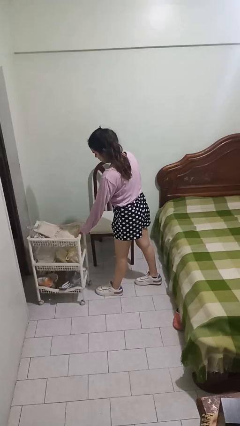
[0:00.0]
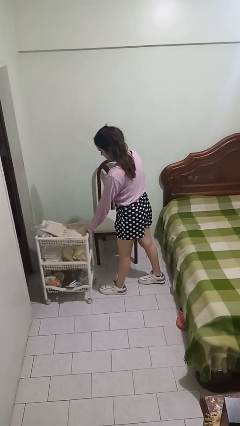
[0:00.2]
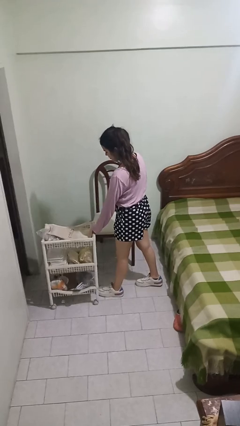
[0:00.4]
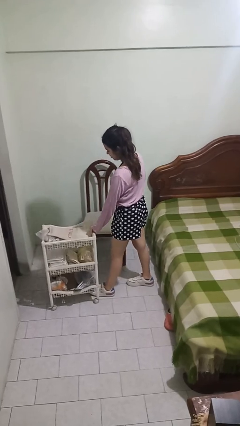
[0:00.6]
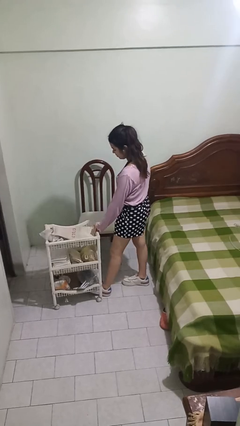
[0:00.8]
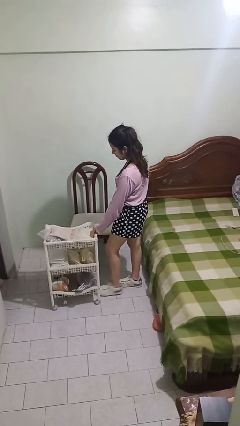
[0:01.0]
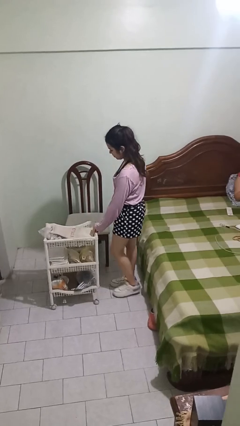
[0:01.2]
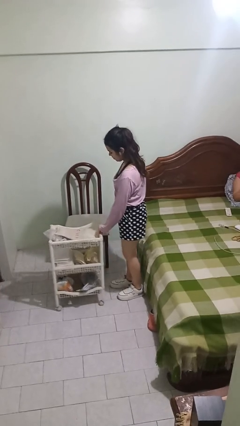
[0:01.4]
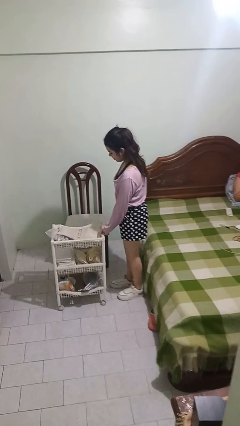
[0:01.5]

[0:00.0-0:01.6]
person pulls wheeled cart

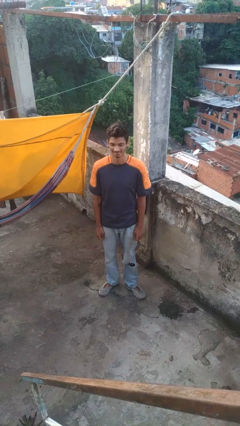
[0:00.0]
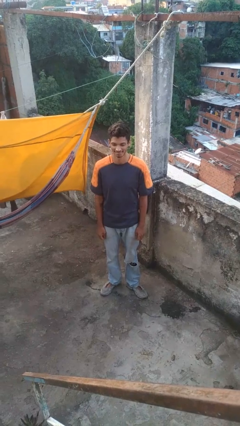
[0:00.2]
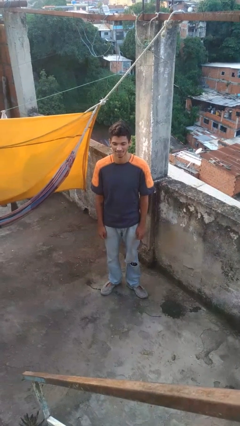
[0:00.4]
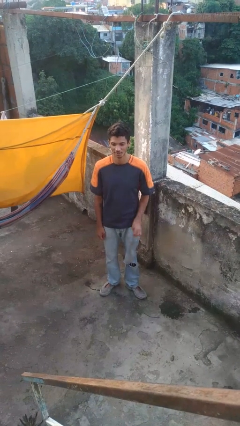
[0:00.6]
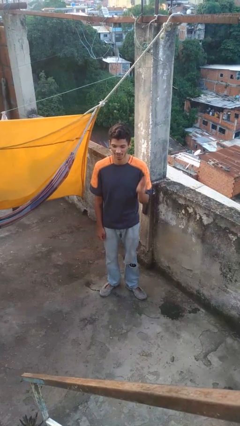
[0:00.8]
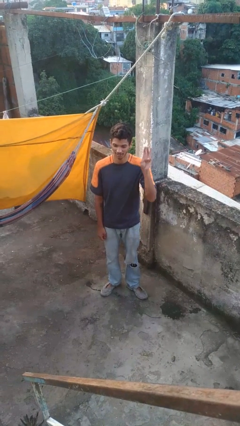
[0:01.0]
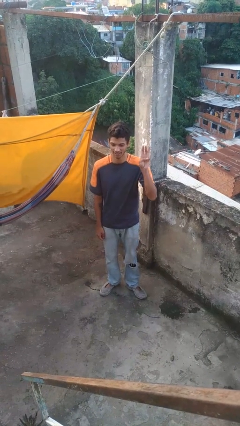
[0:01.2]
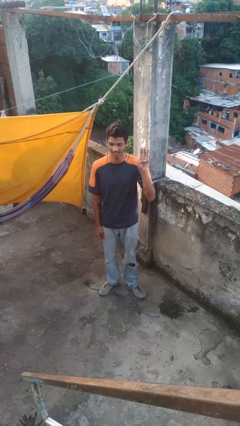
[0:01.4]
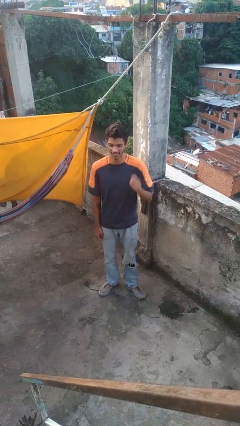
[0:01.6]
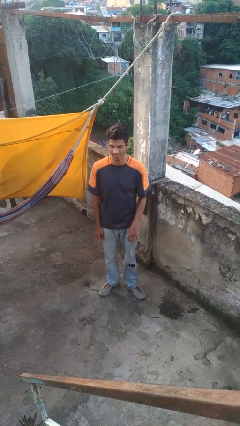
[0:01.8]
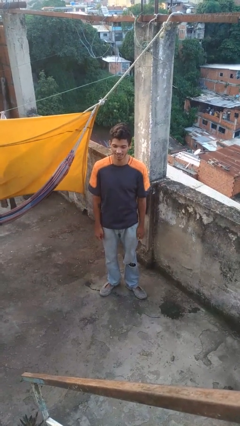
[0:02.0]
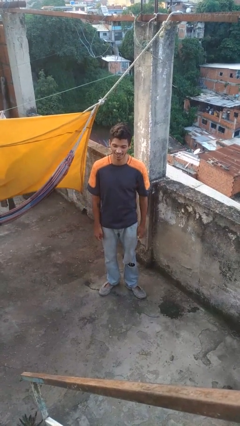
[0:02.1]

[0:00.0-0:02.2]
person gestures number three

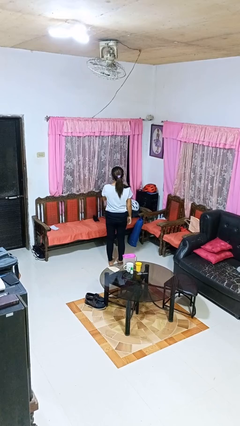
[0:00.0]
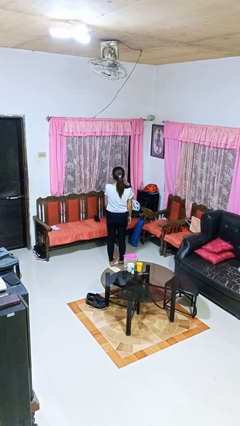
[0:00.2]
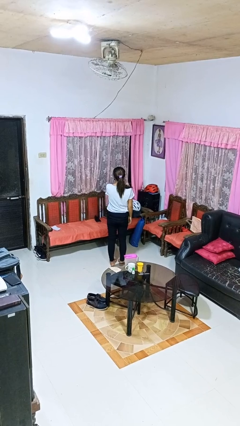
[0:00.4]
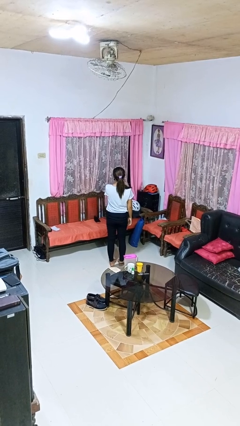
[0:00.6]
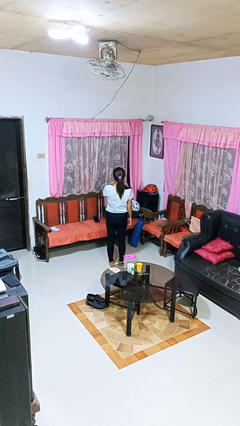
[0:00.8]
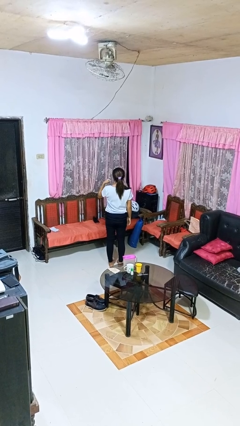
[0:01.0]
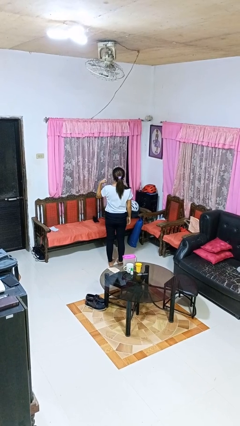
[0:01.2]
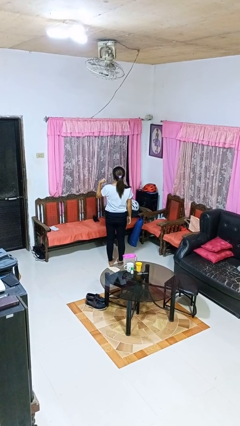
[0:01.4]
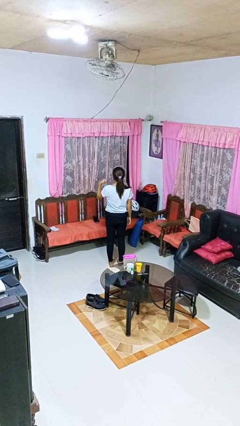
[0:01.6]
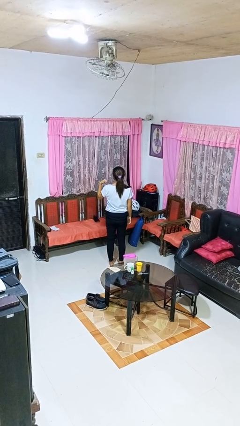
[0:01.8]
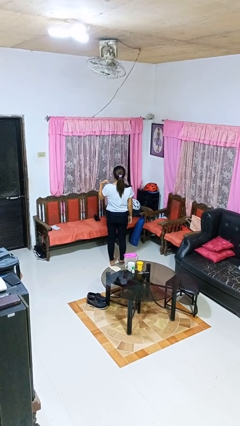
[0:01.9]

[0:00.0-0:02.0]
person gestures cut

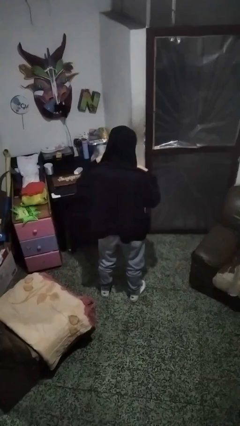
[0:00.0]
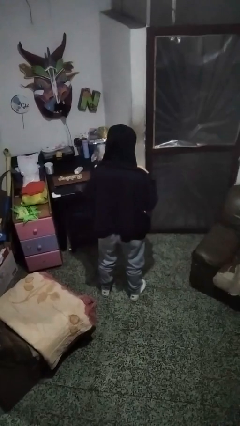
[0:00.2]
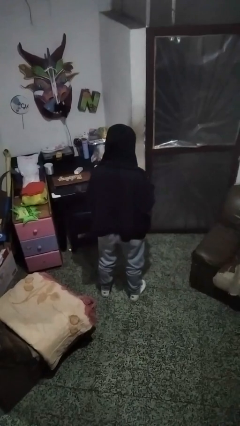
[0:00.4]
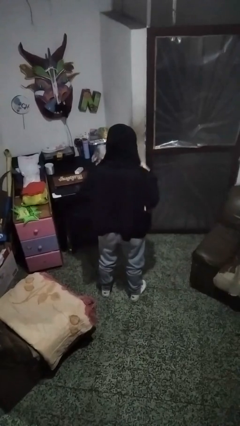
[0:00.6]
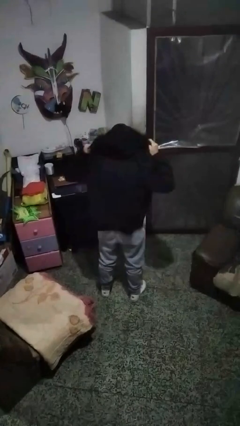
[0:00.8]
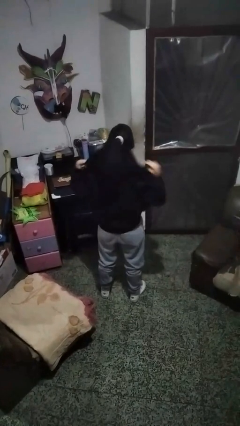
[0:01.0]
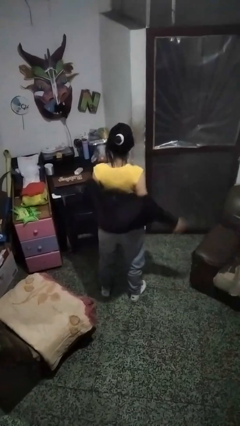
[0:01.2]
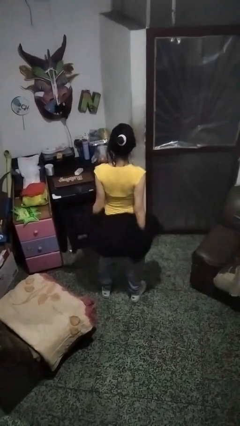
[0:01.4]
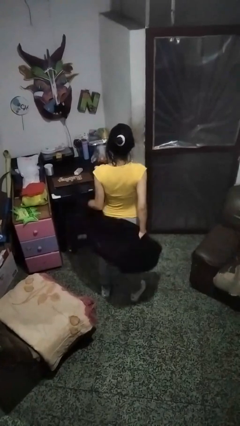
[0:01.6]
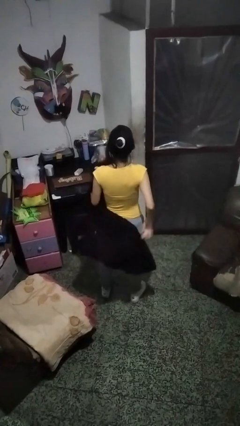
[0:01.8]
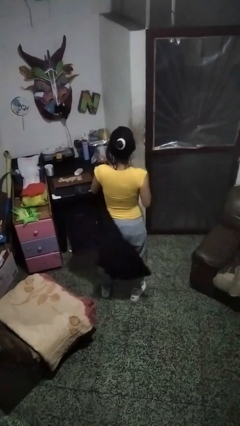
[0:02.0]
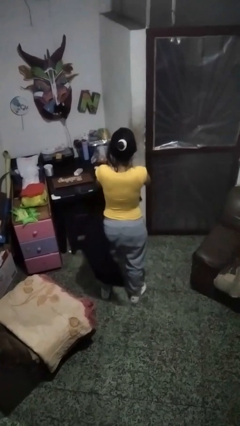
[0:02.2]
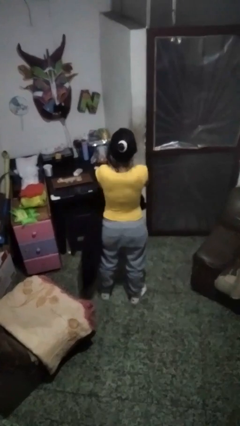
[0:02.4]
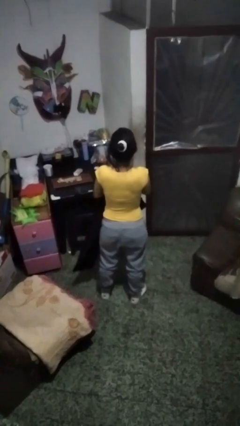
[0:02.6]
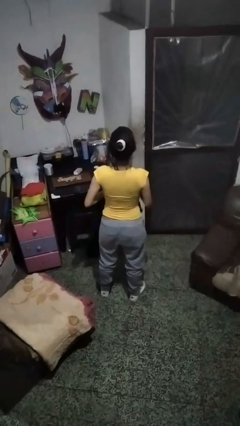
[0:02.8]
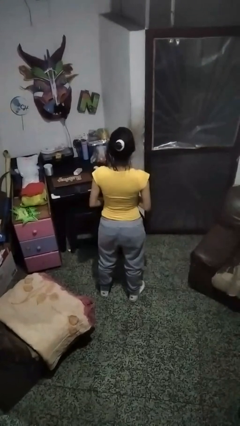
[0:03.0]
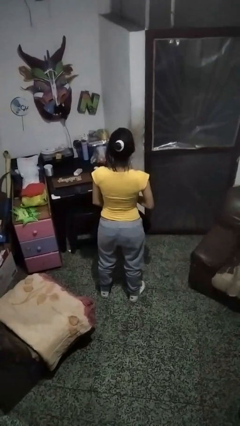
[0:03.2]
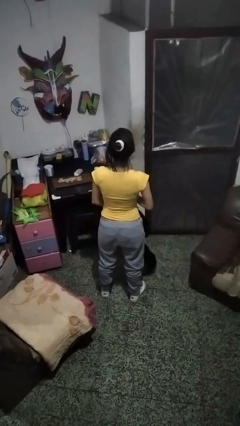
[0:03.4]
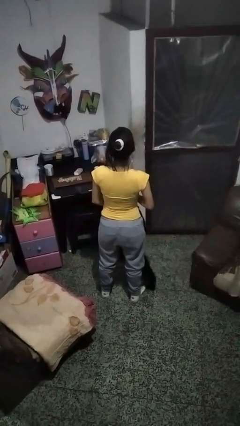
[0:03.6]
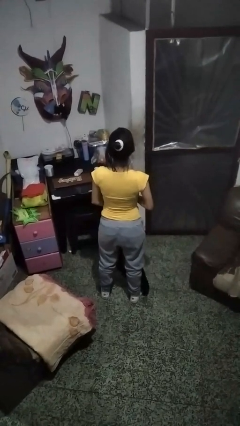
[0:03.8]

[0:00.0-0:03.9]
person takes off hoodie

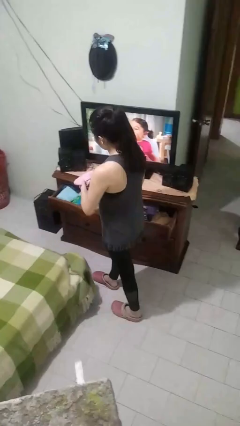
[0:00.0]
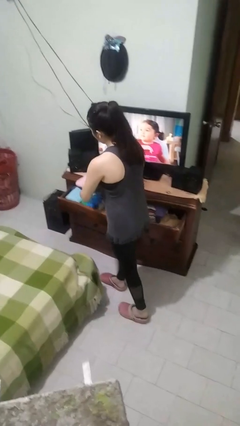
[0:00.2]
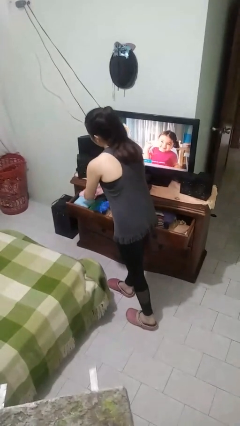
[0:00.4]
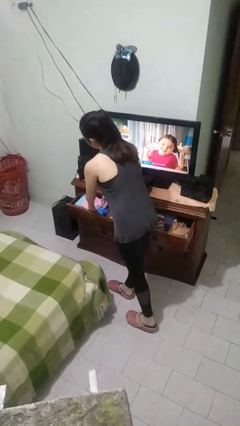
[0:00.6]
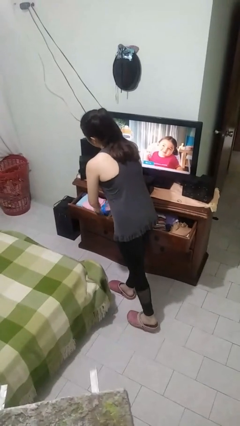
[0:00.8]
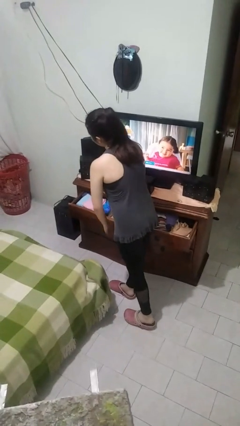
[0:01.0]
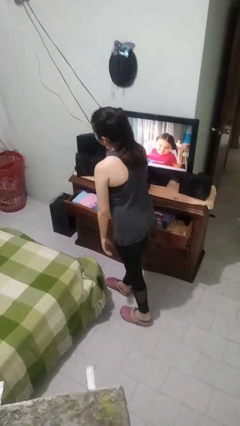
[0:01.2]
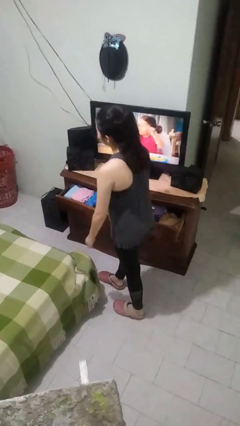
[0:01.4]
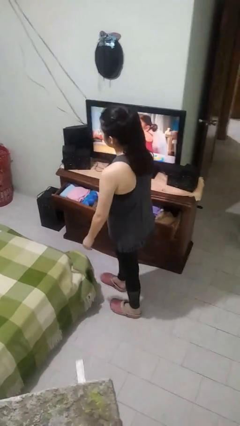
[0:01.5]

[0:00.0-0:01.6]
person puts clothes into dresser

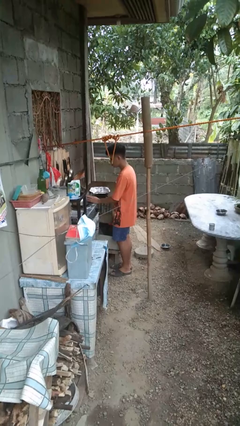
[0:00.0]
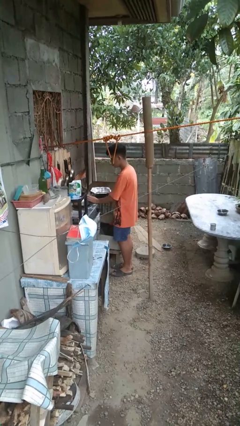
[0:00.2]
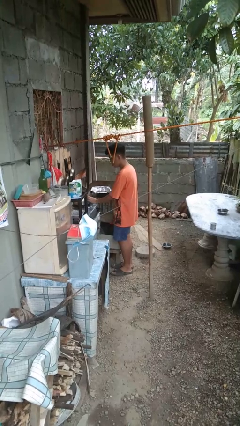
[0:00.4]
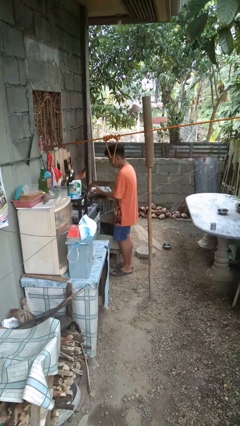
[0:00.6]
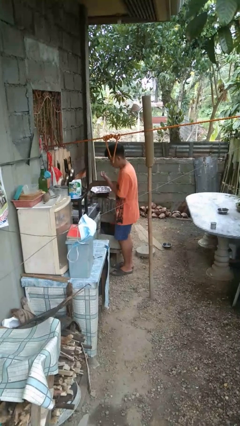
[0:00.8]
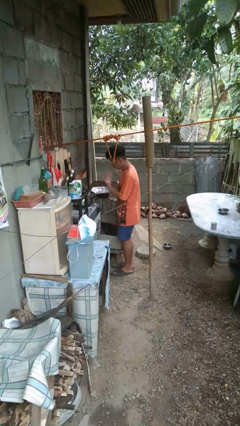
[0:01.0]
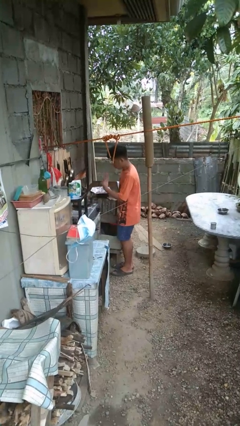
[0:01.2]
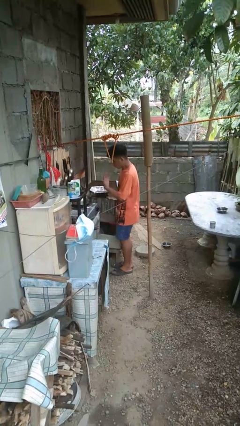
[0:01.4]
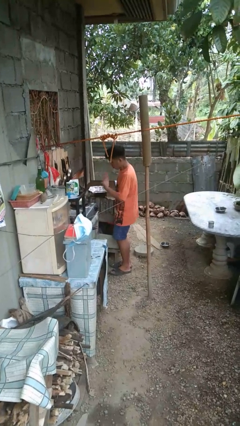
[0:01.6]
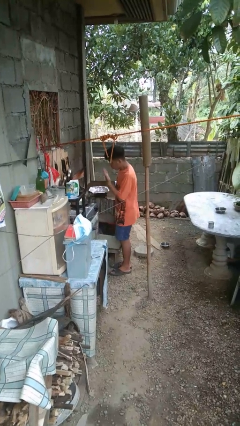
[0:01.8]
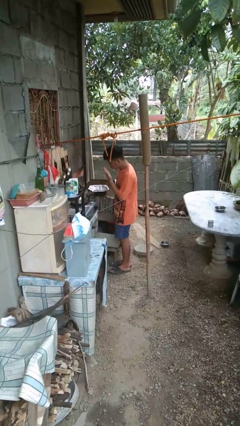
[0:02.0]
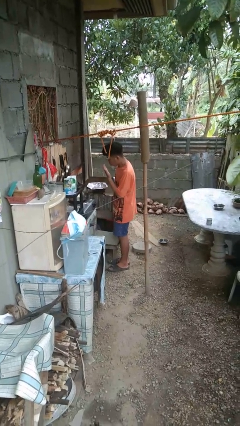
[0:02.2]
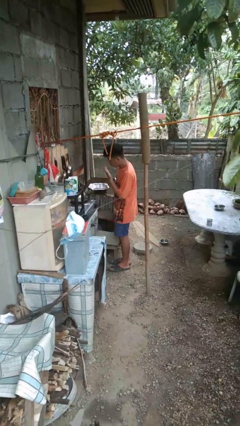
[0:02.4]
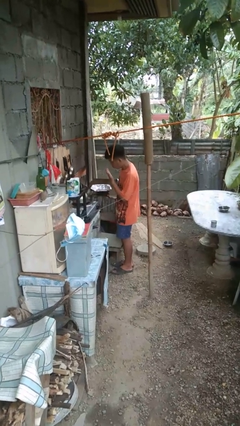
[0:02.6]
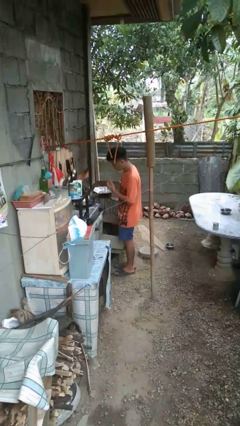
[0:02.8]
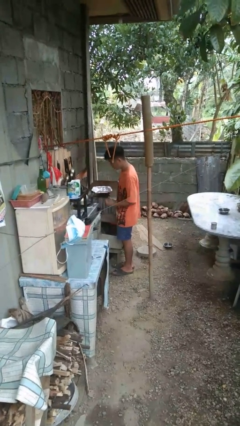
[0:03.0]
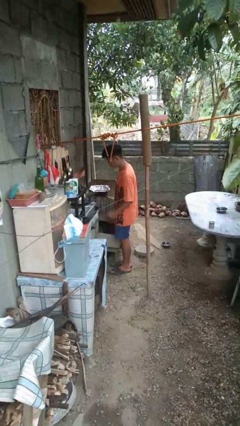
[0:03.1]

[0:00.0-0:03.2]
person burns hand

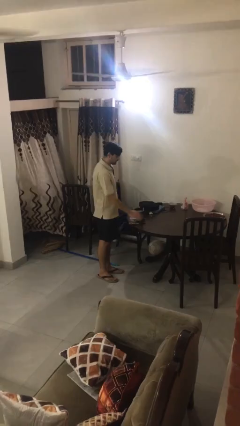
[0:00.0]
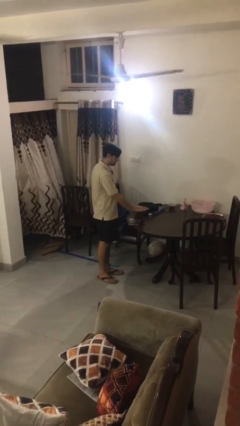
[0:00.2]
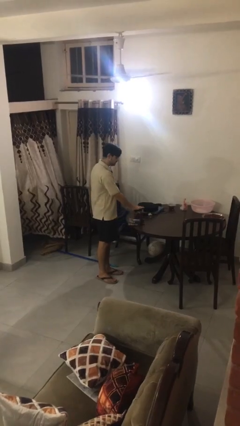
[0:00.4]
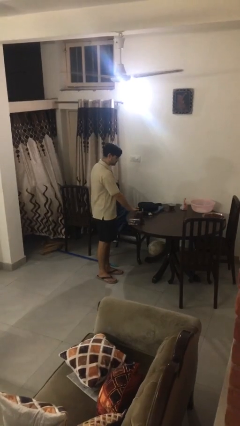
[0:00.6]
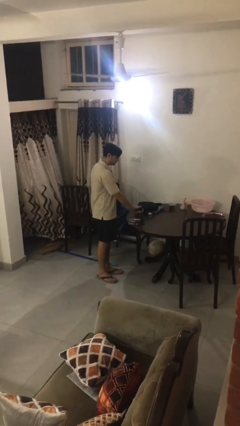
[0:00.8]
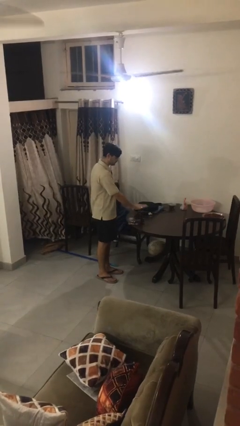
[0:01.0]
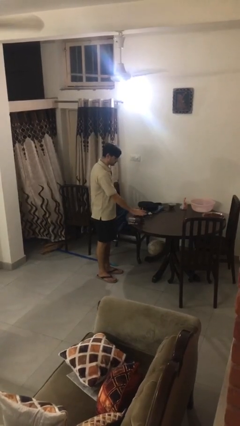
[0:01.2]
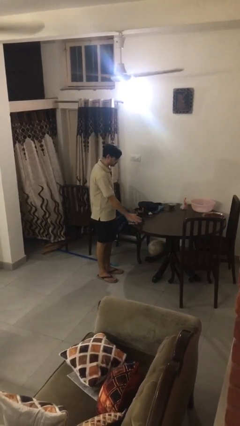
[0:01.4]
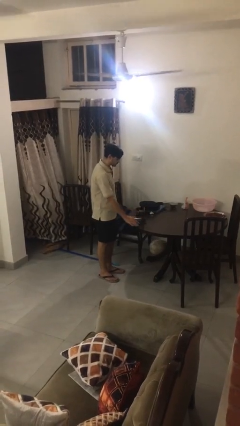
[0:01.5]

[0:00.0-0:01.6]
person waves hand over object

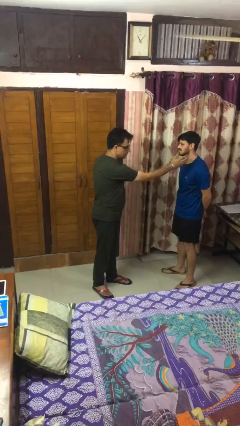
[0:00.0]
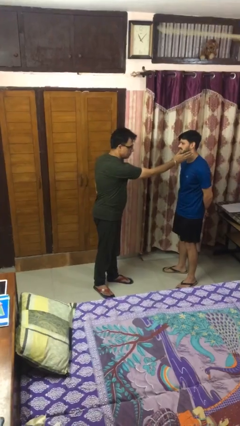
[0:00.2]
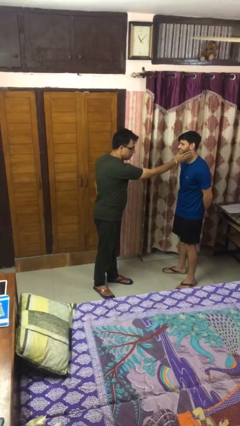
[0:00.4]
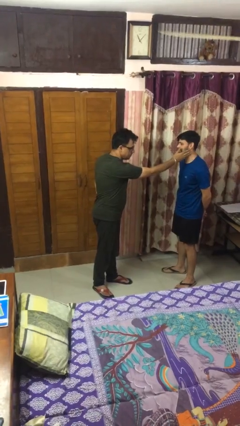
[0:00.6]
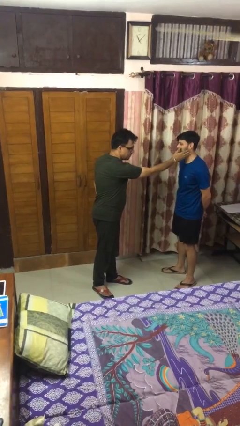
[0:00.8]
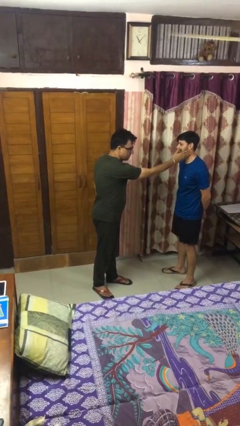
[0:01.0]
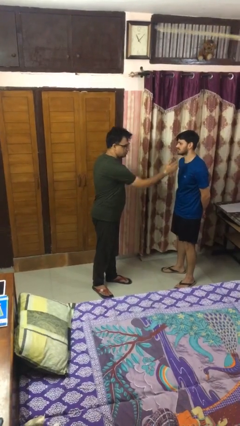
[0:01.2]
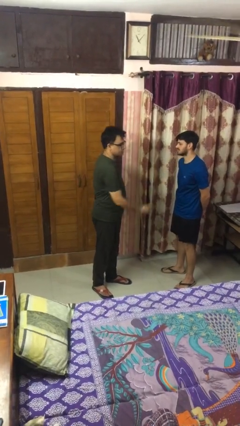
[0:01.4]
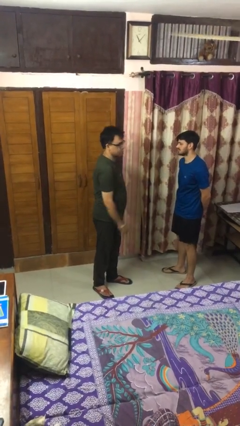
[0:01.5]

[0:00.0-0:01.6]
person touches face of person
